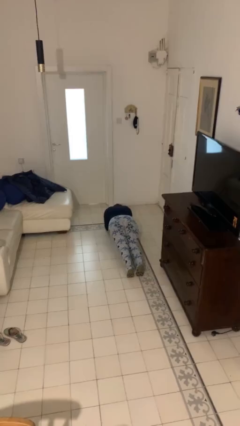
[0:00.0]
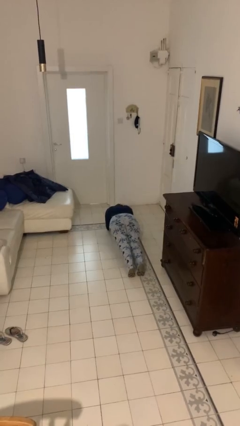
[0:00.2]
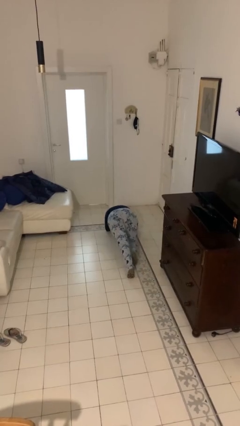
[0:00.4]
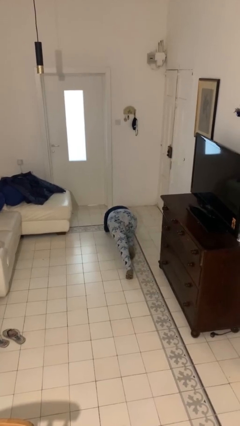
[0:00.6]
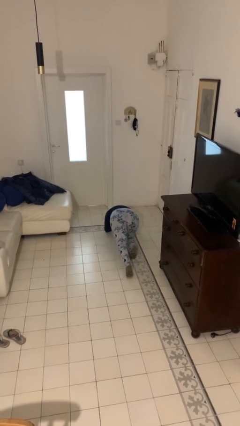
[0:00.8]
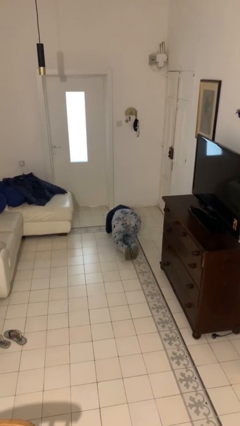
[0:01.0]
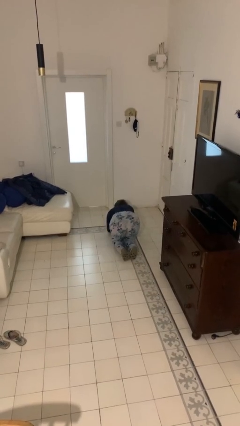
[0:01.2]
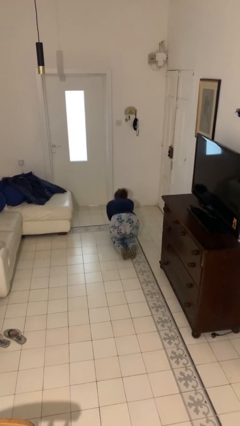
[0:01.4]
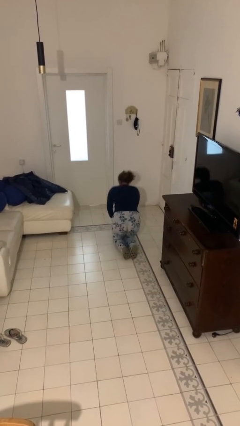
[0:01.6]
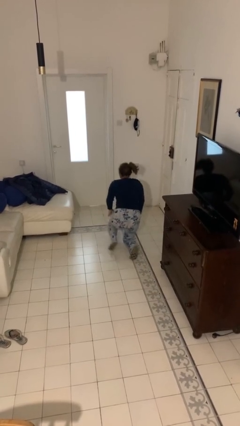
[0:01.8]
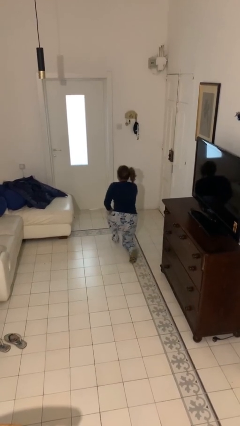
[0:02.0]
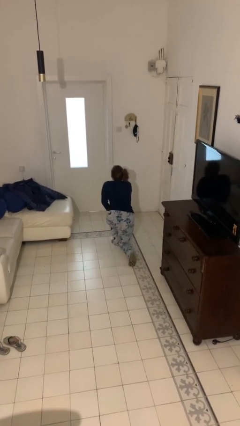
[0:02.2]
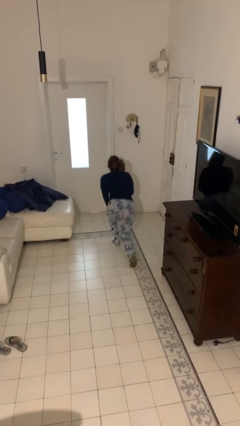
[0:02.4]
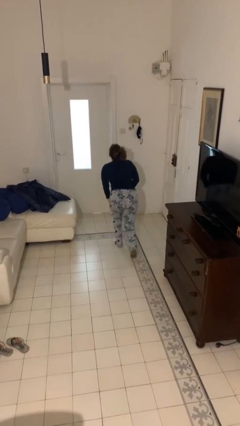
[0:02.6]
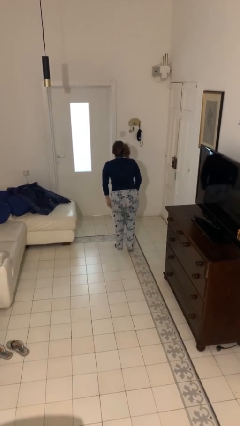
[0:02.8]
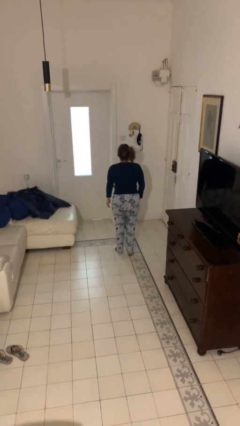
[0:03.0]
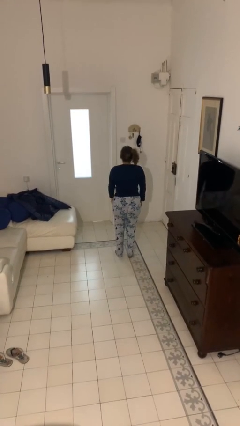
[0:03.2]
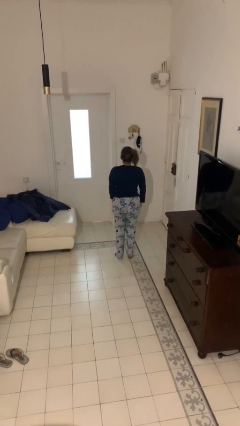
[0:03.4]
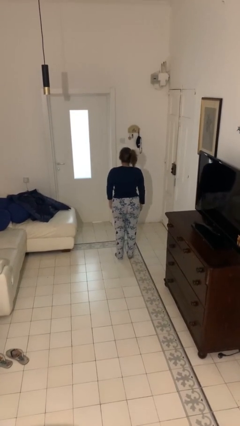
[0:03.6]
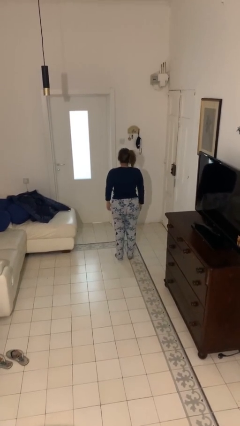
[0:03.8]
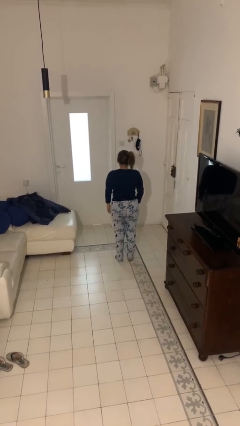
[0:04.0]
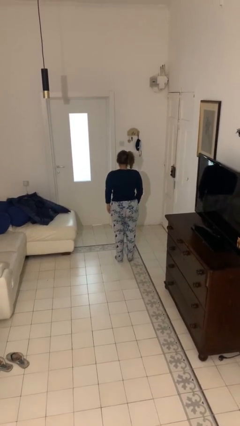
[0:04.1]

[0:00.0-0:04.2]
person stands up from floor

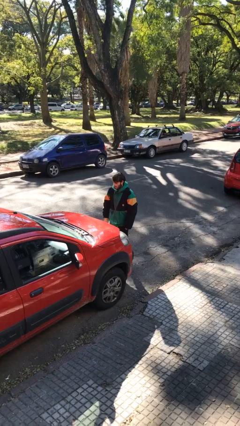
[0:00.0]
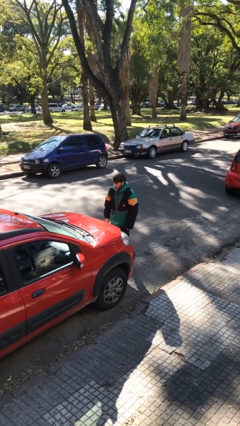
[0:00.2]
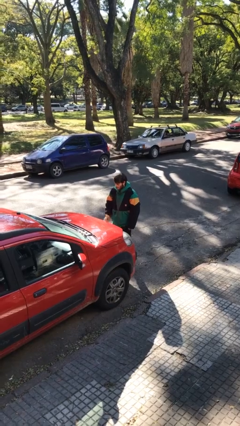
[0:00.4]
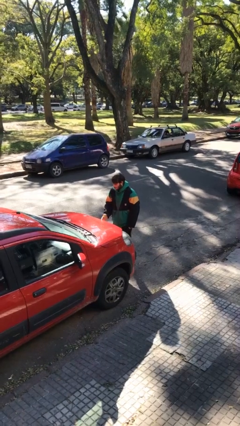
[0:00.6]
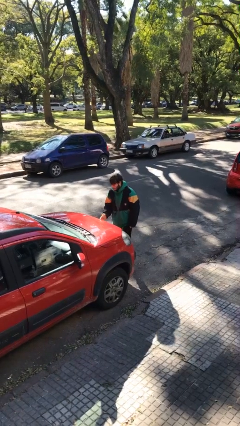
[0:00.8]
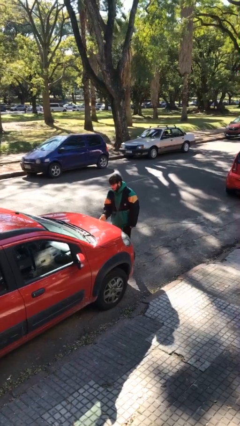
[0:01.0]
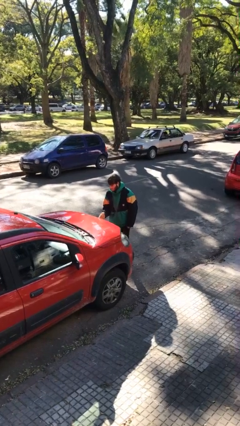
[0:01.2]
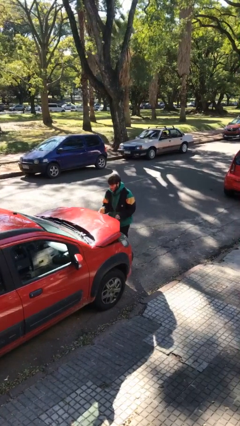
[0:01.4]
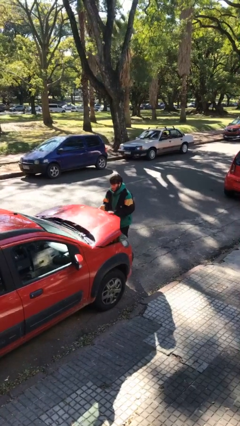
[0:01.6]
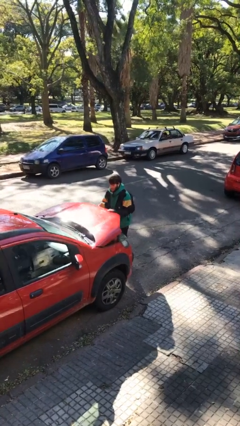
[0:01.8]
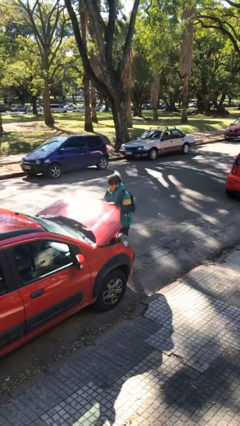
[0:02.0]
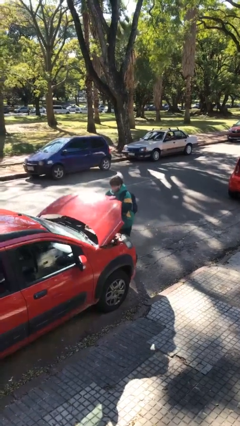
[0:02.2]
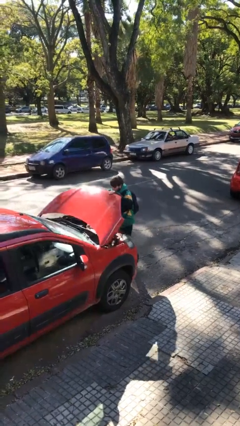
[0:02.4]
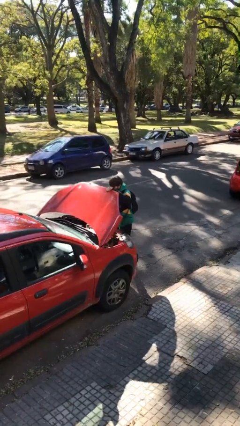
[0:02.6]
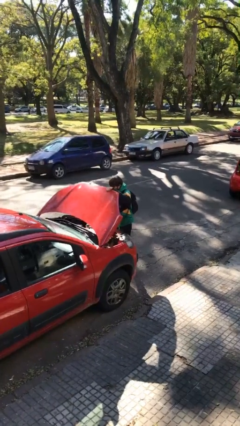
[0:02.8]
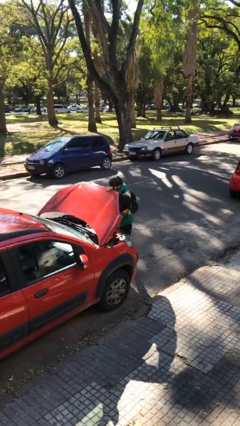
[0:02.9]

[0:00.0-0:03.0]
person opens car hood

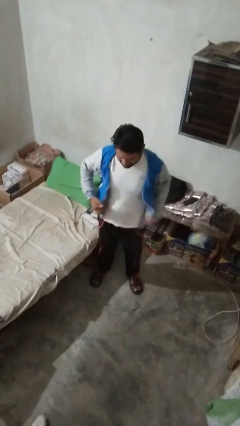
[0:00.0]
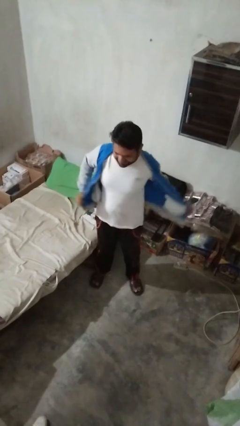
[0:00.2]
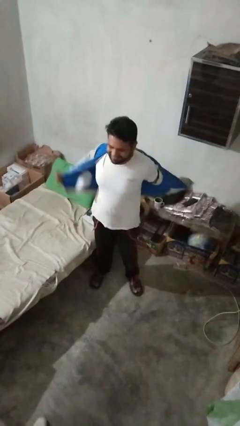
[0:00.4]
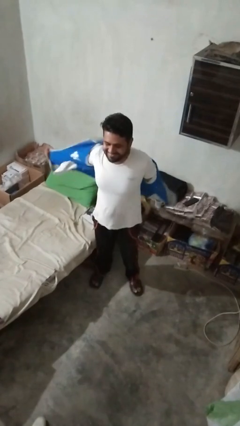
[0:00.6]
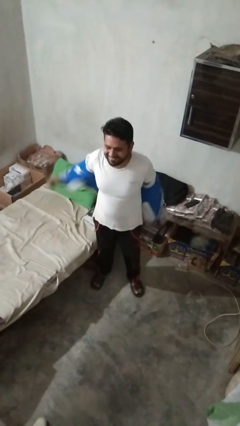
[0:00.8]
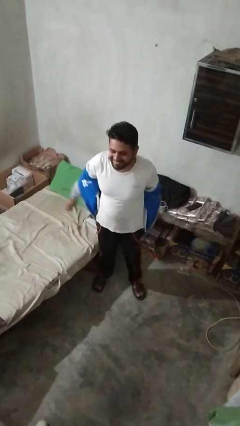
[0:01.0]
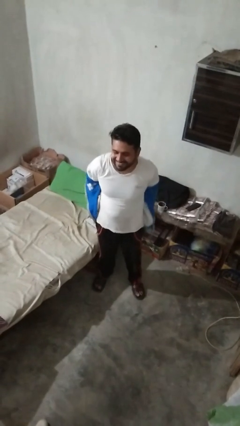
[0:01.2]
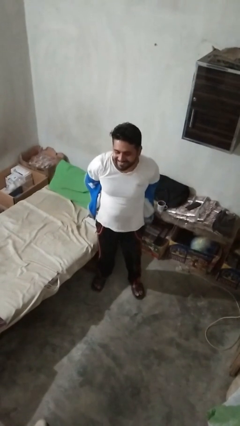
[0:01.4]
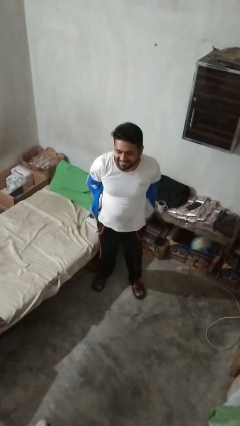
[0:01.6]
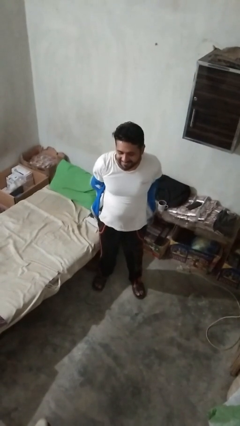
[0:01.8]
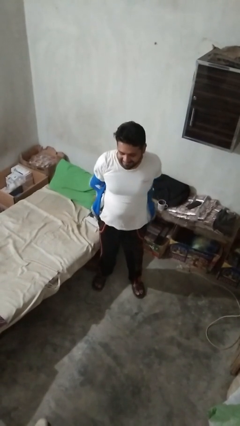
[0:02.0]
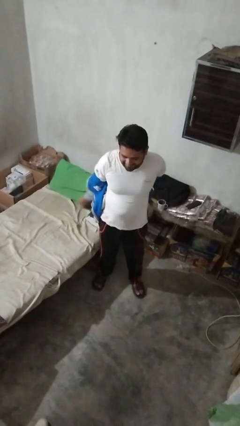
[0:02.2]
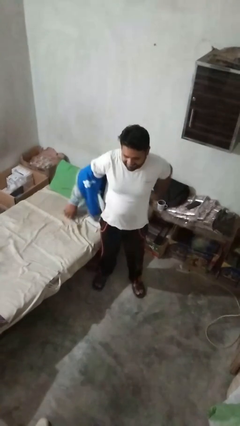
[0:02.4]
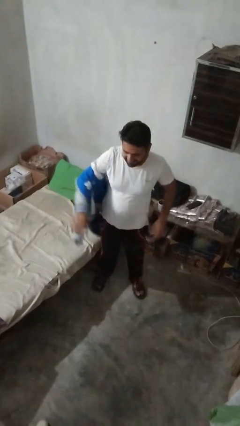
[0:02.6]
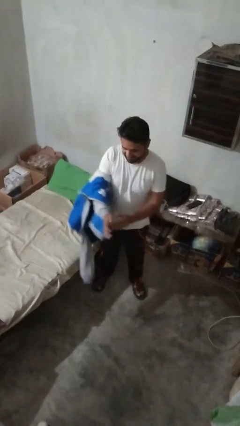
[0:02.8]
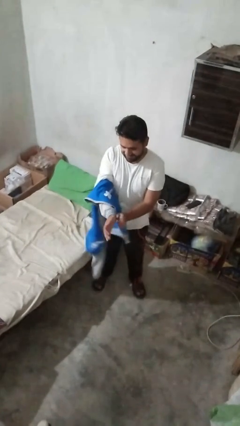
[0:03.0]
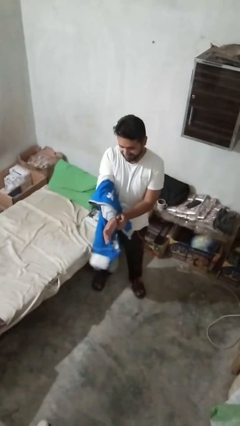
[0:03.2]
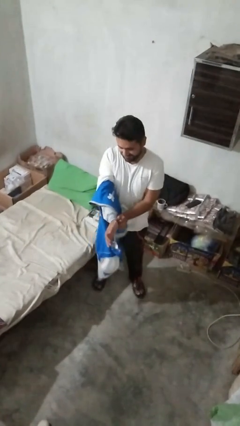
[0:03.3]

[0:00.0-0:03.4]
person takes off jacket

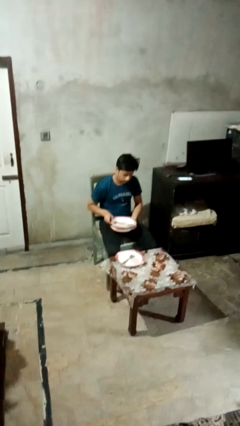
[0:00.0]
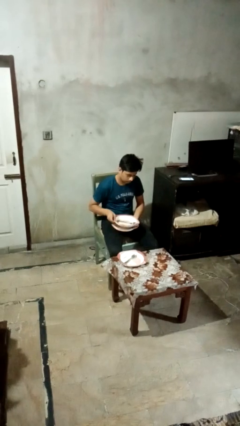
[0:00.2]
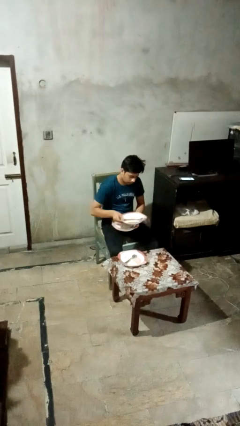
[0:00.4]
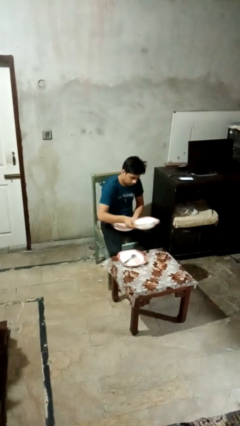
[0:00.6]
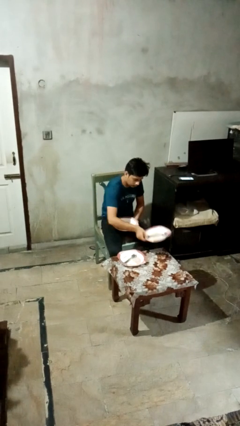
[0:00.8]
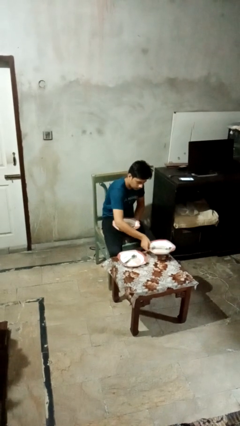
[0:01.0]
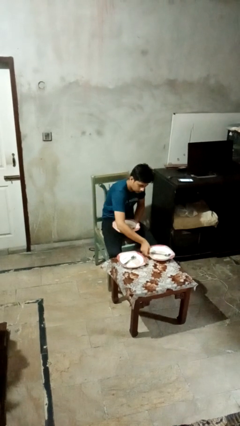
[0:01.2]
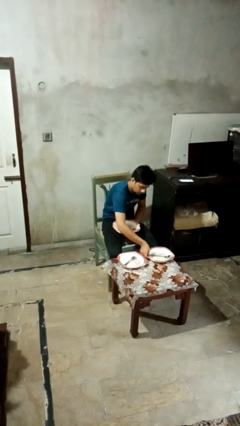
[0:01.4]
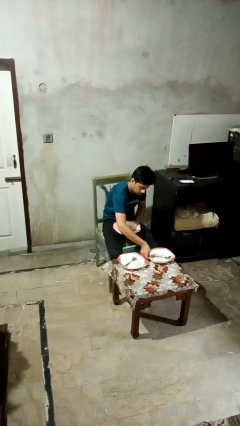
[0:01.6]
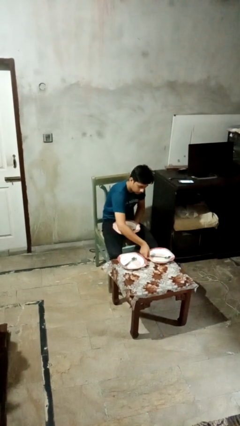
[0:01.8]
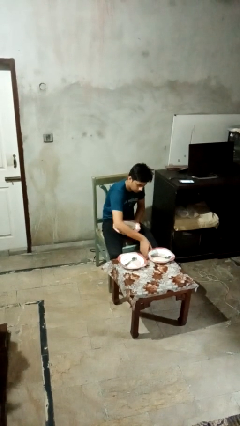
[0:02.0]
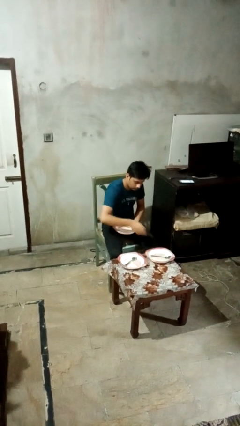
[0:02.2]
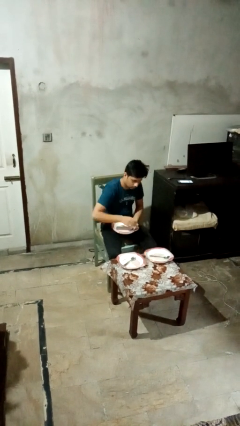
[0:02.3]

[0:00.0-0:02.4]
person sets table

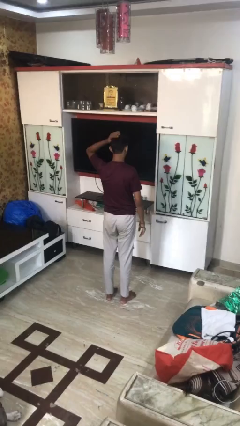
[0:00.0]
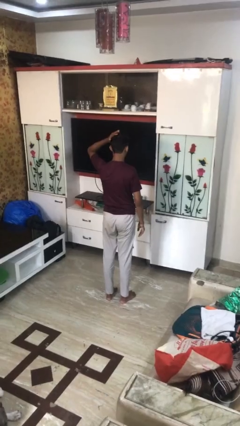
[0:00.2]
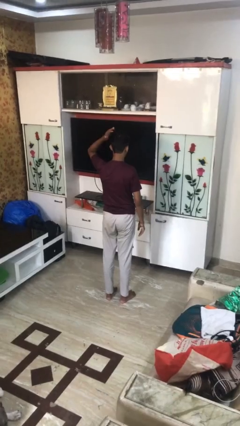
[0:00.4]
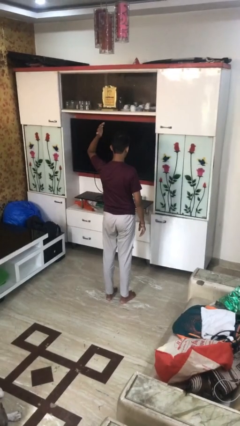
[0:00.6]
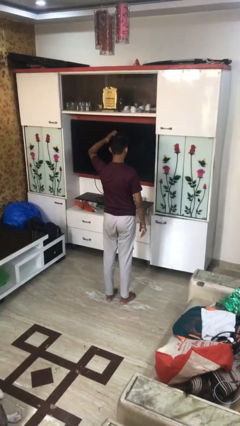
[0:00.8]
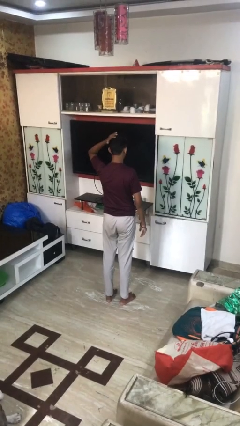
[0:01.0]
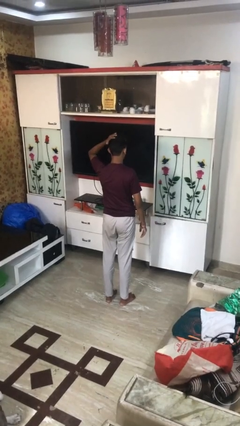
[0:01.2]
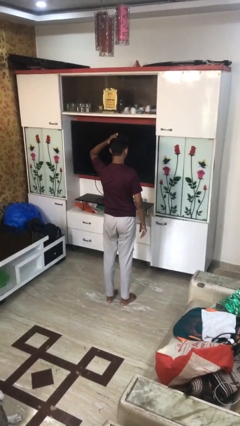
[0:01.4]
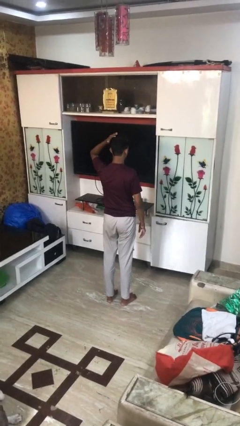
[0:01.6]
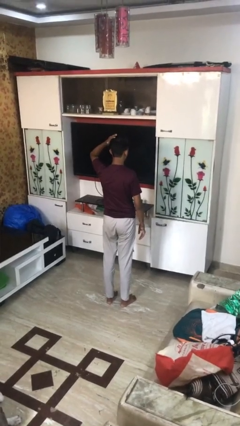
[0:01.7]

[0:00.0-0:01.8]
person pats head

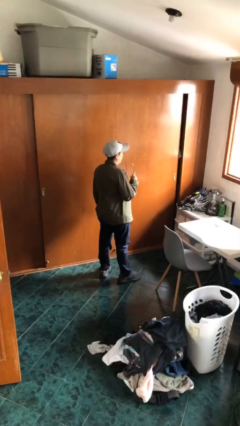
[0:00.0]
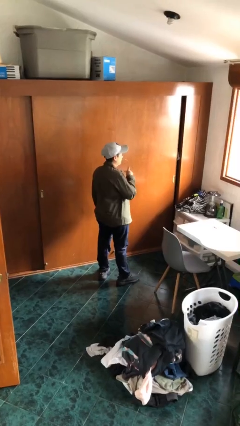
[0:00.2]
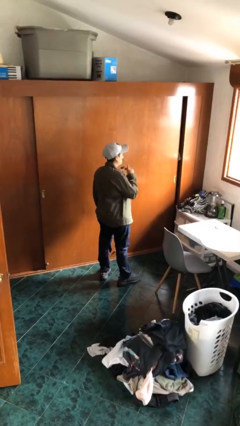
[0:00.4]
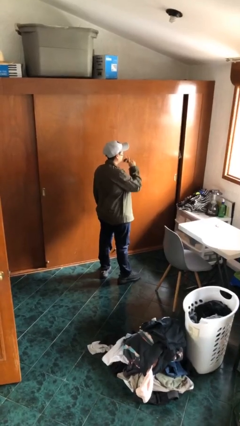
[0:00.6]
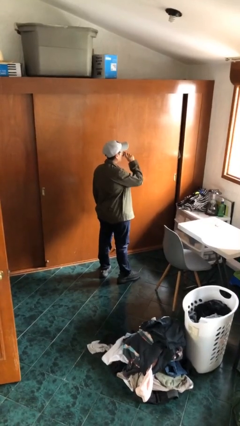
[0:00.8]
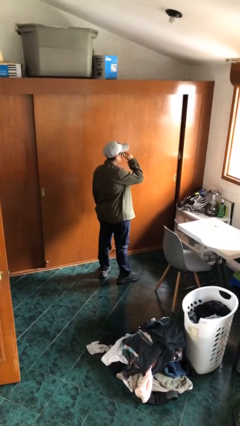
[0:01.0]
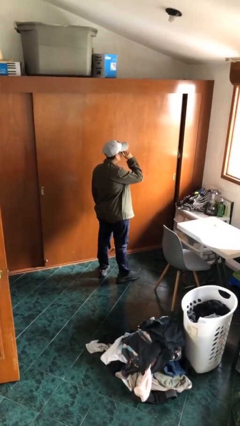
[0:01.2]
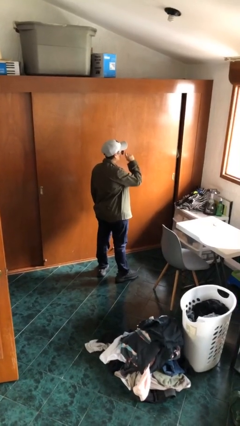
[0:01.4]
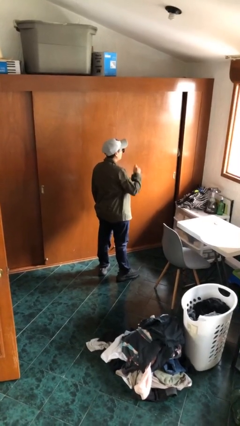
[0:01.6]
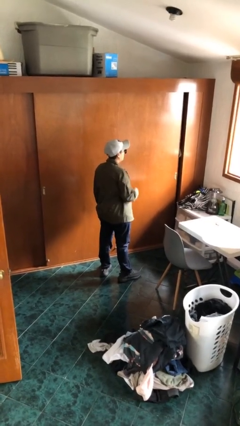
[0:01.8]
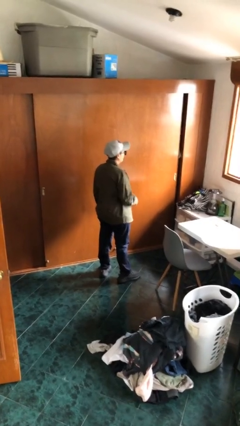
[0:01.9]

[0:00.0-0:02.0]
person puts on sunglasses

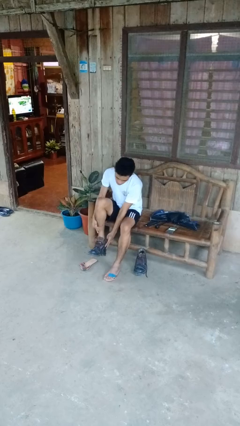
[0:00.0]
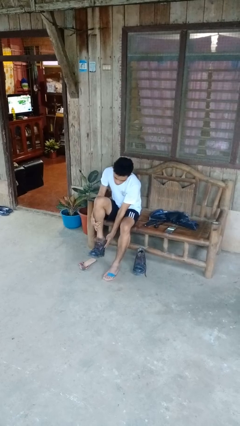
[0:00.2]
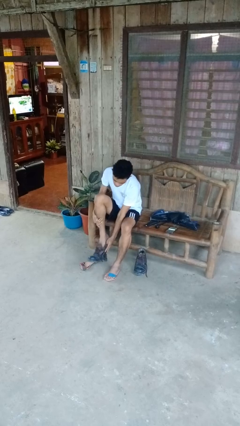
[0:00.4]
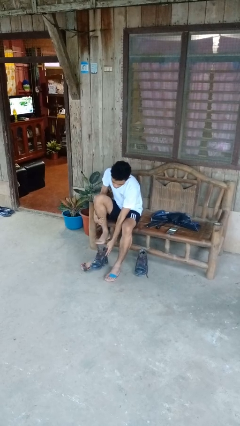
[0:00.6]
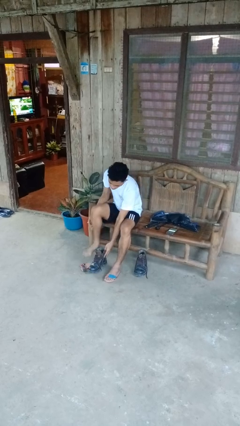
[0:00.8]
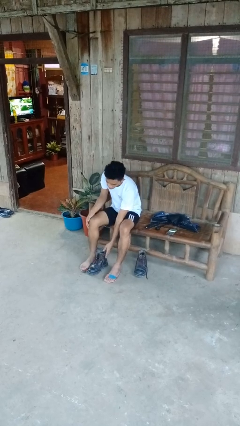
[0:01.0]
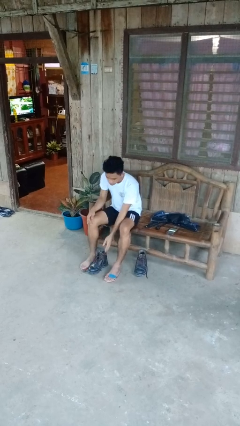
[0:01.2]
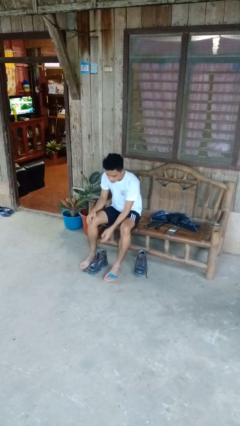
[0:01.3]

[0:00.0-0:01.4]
person takes off boots
